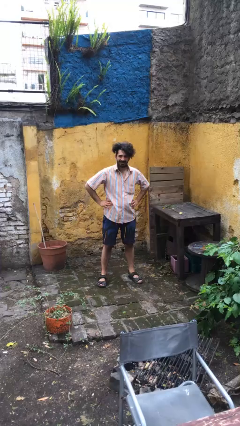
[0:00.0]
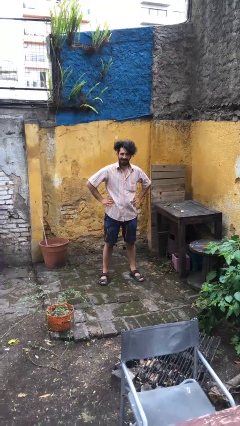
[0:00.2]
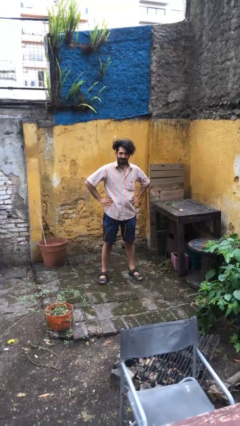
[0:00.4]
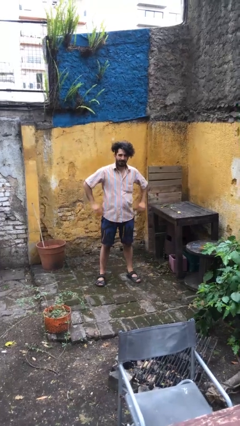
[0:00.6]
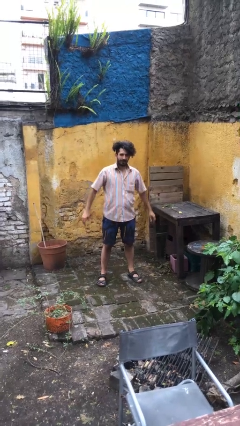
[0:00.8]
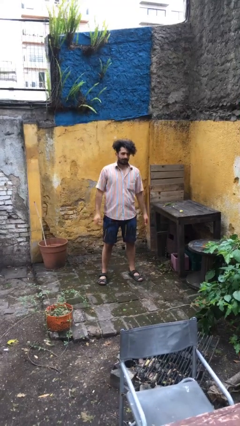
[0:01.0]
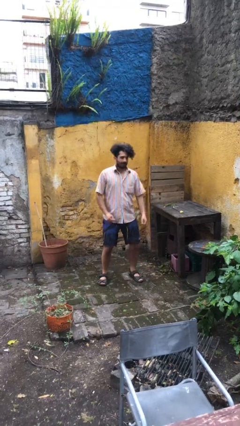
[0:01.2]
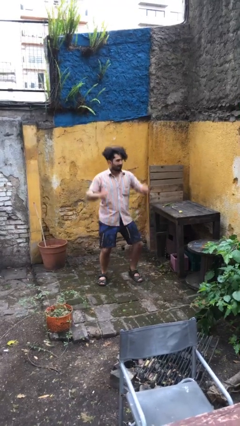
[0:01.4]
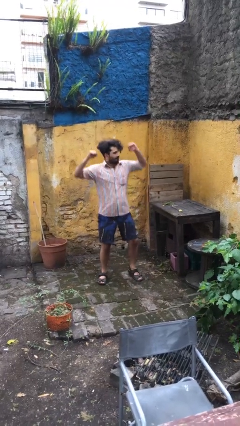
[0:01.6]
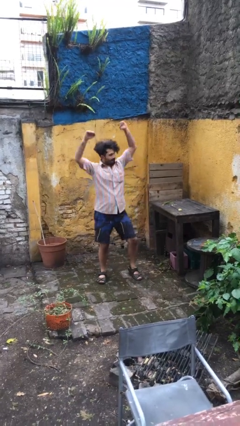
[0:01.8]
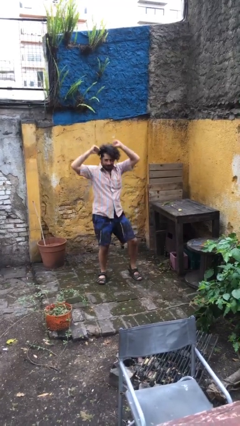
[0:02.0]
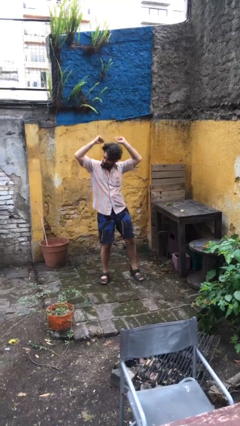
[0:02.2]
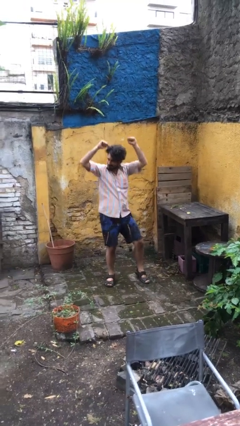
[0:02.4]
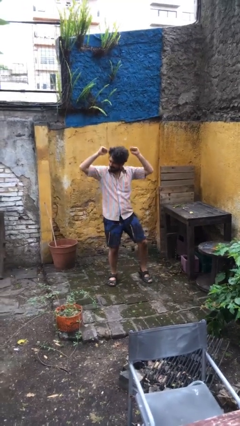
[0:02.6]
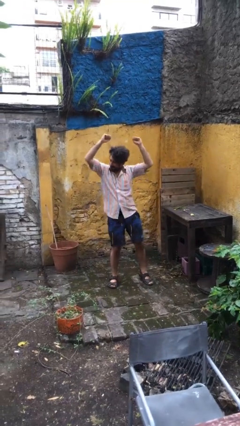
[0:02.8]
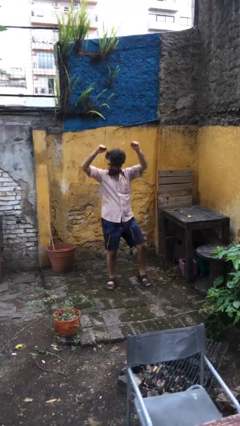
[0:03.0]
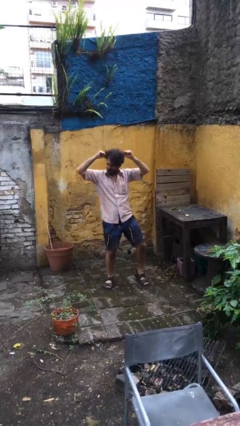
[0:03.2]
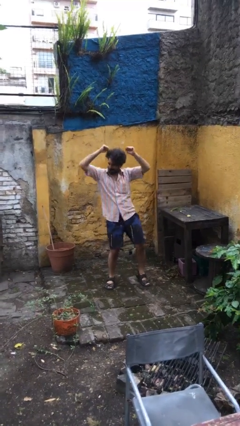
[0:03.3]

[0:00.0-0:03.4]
person dances in place

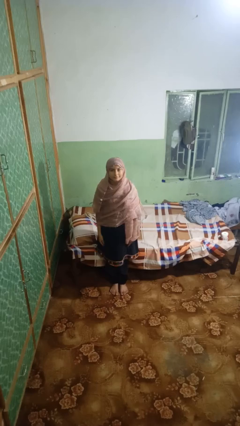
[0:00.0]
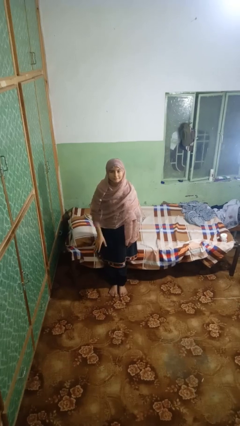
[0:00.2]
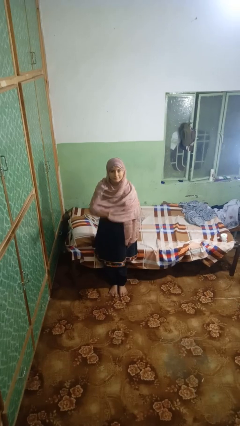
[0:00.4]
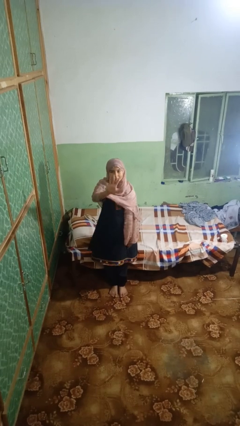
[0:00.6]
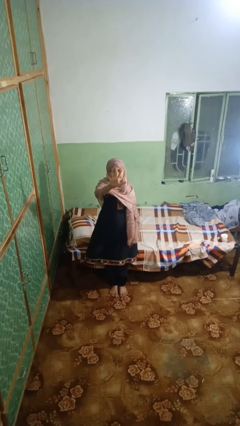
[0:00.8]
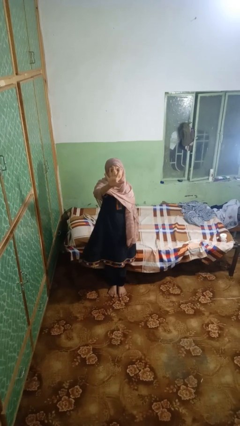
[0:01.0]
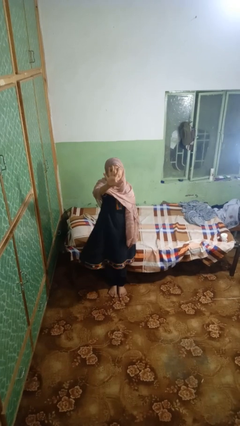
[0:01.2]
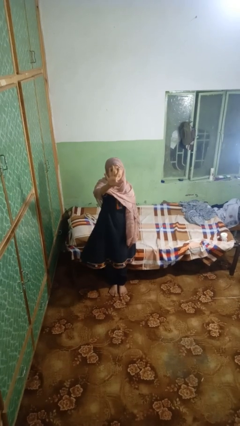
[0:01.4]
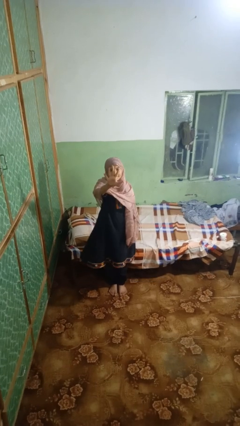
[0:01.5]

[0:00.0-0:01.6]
person gestures number five

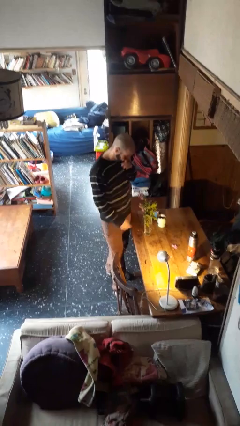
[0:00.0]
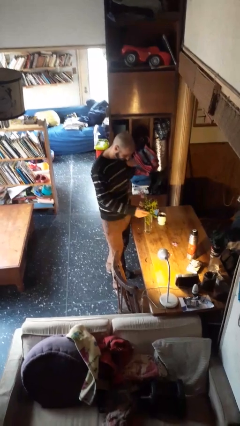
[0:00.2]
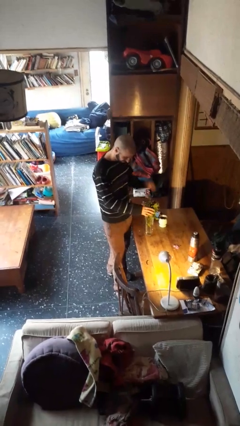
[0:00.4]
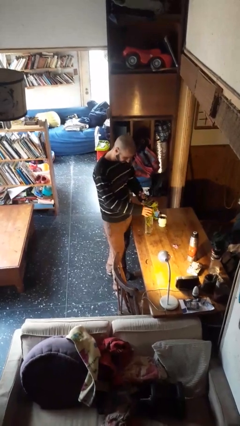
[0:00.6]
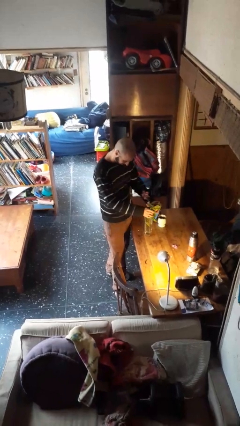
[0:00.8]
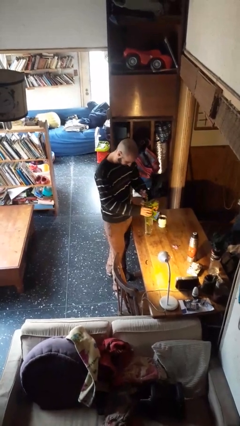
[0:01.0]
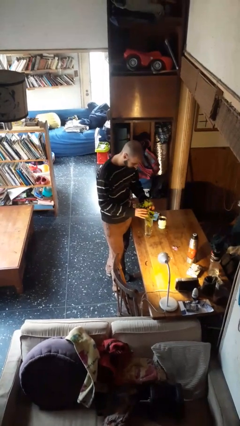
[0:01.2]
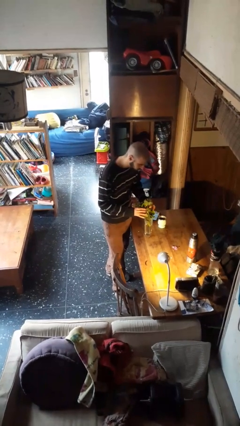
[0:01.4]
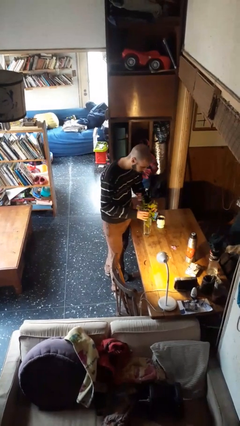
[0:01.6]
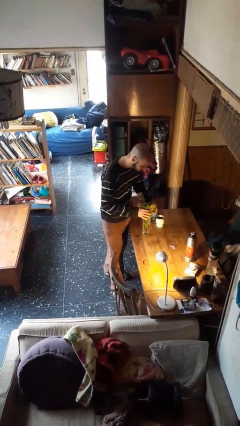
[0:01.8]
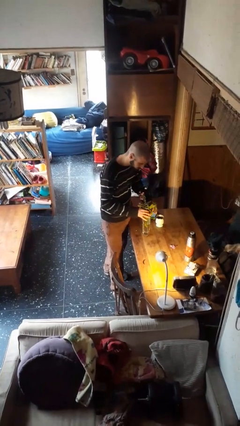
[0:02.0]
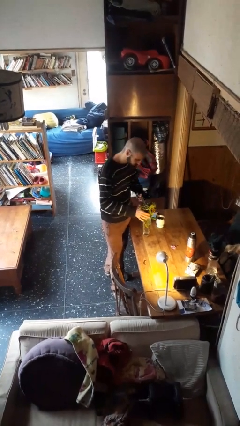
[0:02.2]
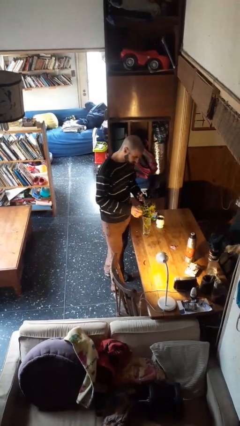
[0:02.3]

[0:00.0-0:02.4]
person arranges flowers in vase

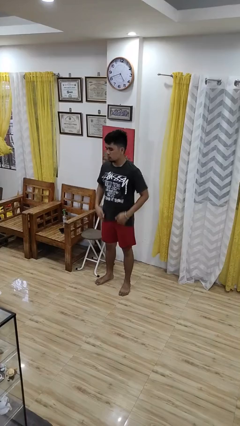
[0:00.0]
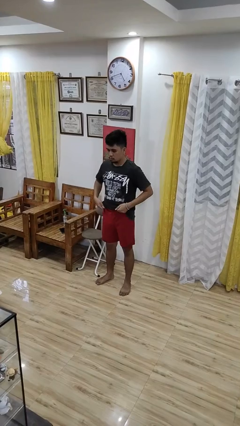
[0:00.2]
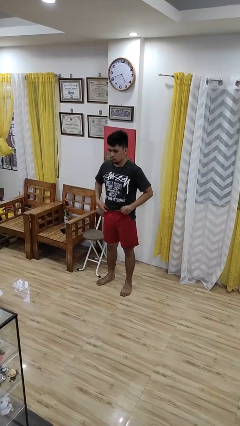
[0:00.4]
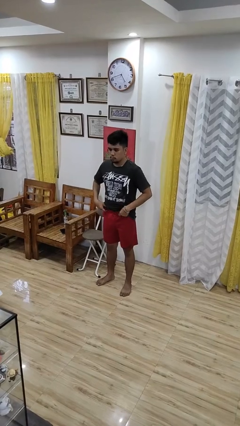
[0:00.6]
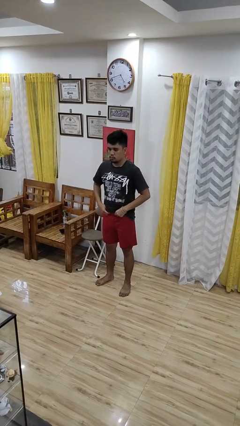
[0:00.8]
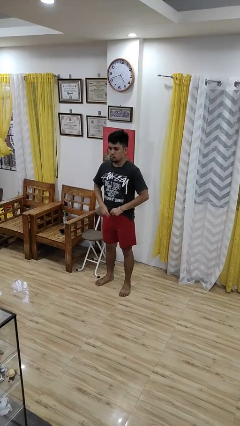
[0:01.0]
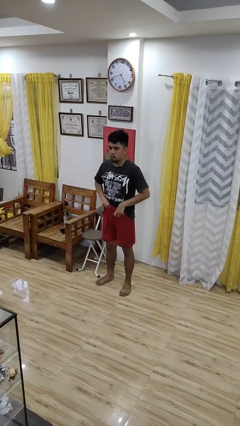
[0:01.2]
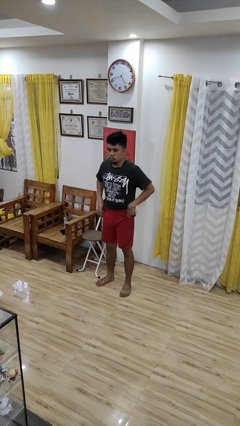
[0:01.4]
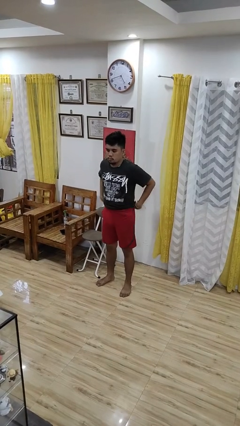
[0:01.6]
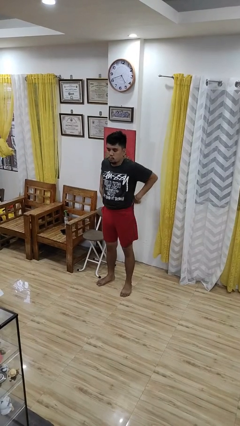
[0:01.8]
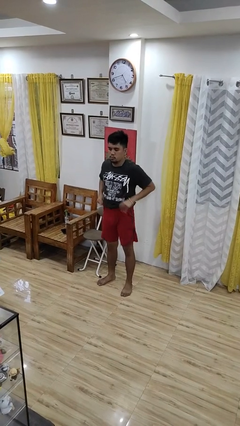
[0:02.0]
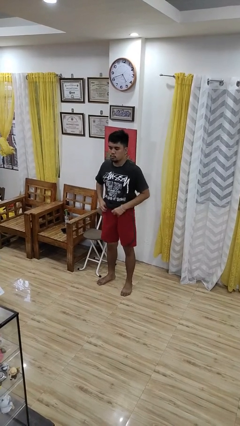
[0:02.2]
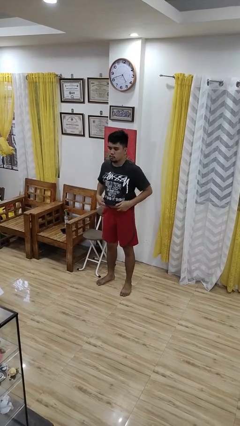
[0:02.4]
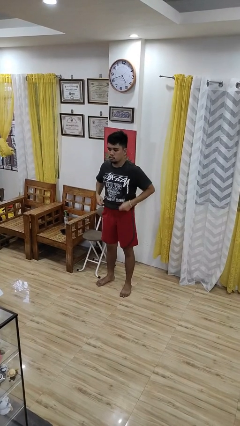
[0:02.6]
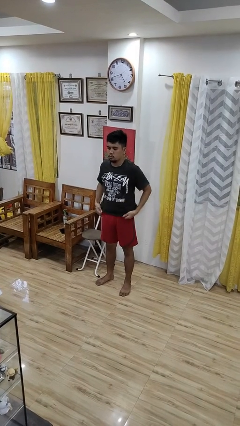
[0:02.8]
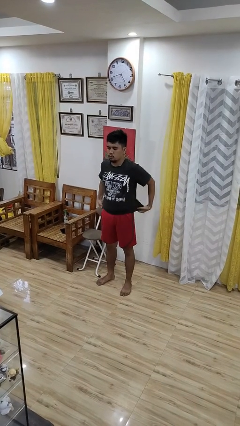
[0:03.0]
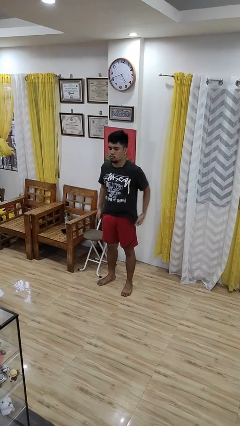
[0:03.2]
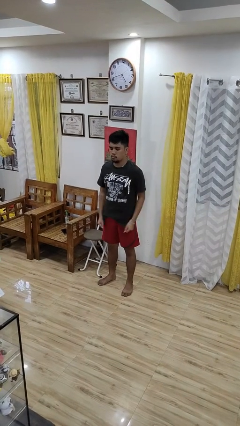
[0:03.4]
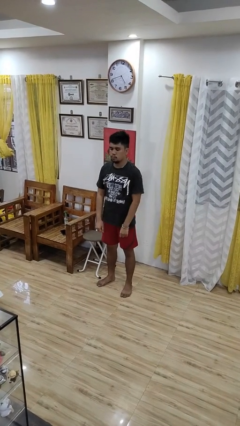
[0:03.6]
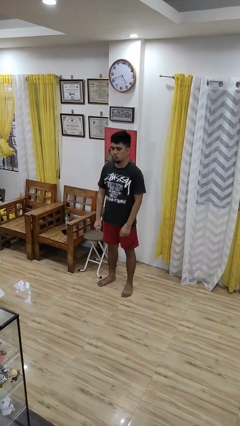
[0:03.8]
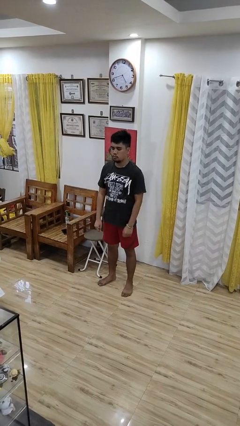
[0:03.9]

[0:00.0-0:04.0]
person hikes up pants

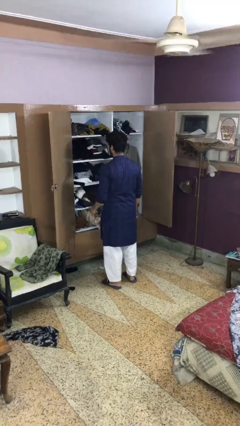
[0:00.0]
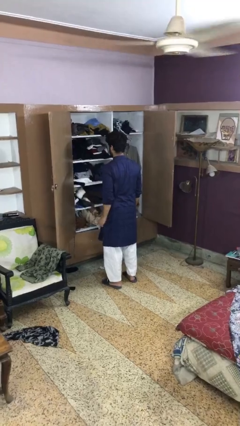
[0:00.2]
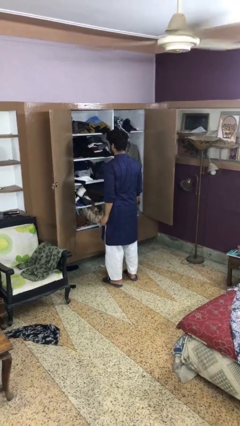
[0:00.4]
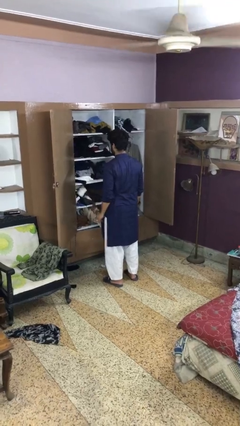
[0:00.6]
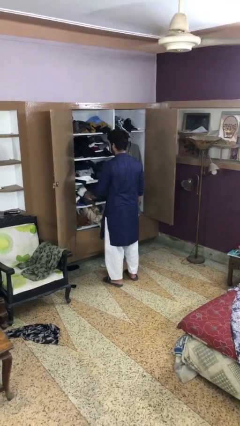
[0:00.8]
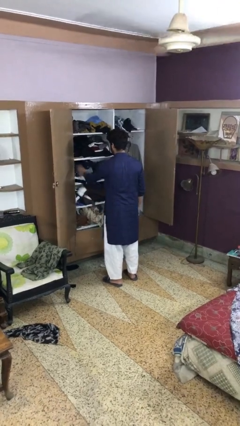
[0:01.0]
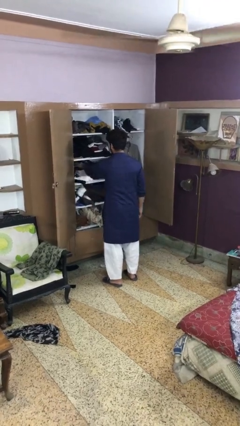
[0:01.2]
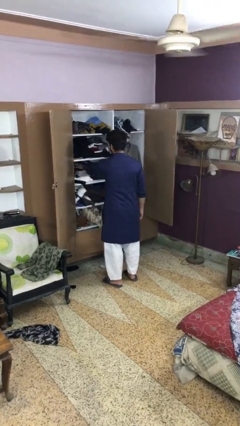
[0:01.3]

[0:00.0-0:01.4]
person takes clothes from dresser

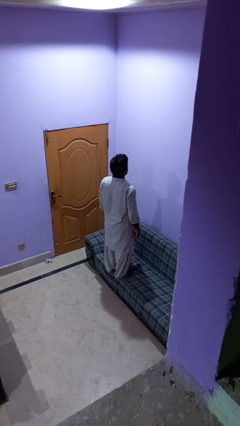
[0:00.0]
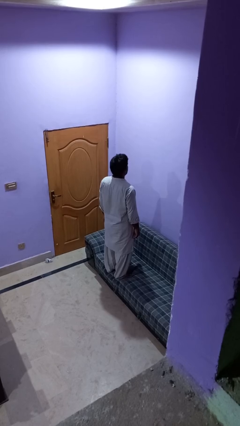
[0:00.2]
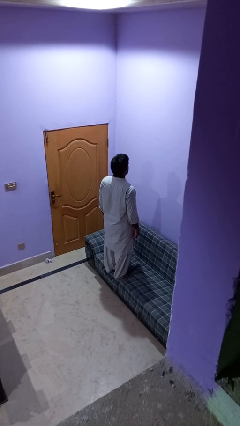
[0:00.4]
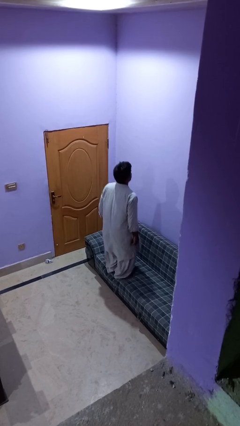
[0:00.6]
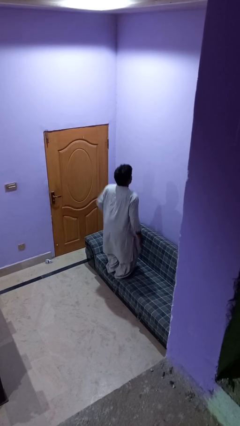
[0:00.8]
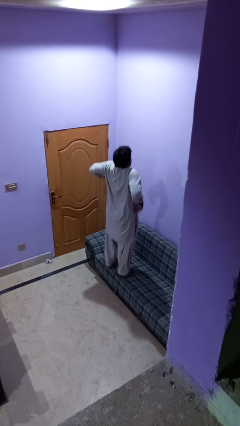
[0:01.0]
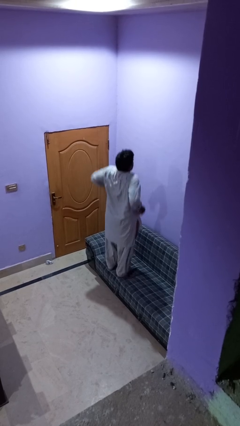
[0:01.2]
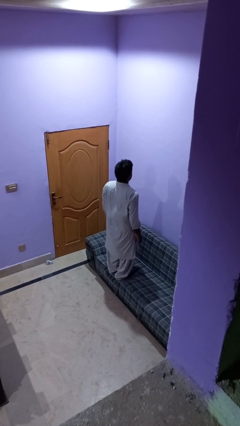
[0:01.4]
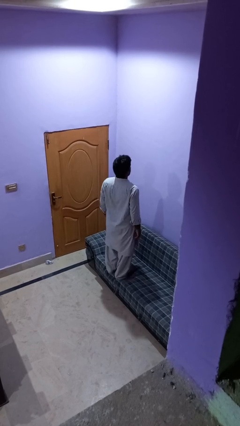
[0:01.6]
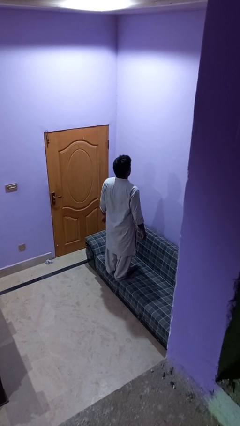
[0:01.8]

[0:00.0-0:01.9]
person jumps on couch

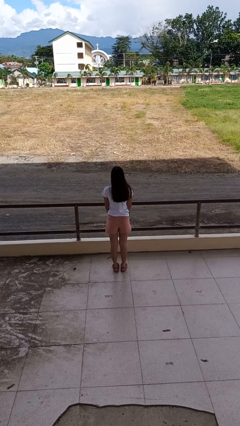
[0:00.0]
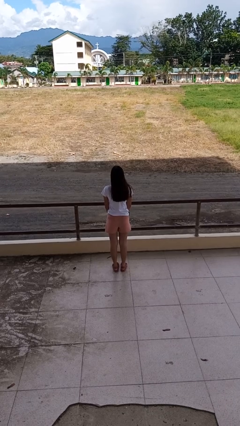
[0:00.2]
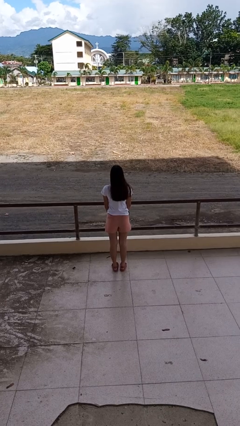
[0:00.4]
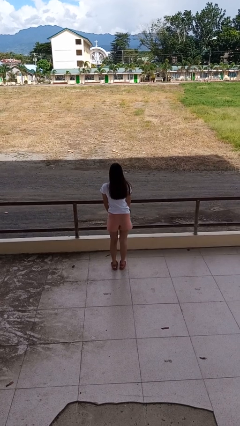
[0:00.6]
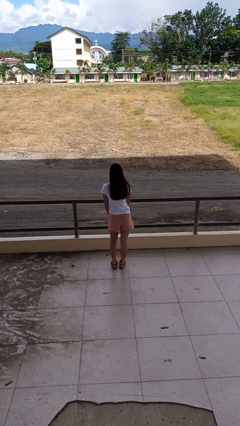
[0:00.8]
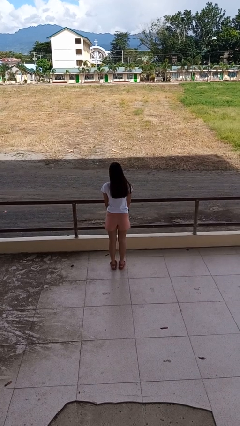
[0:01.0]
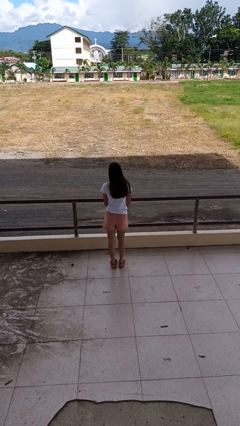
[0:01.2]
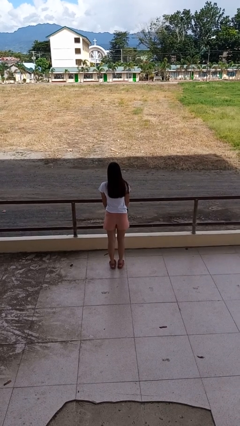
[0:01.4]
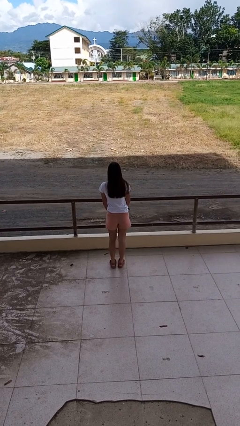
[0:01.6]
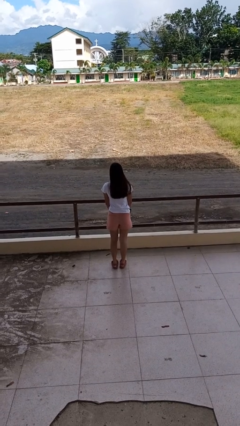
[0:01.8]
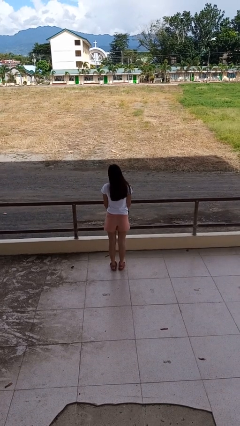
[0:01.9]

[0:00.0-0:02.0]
person wiggles hips

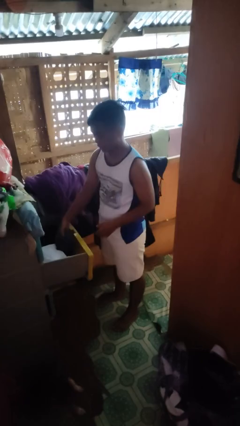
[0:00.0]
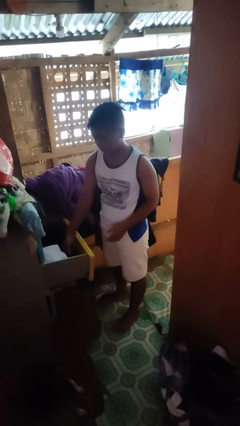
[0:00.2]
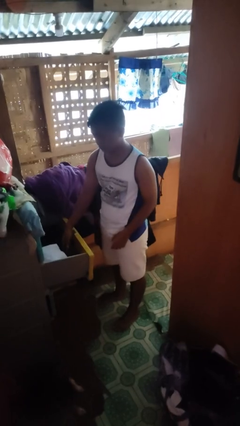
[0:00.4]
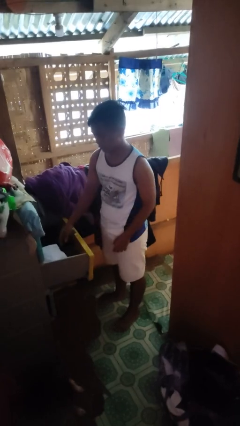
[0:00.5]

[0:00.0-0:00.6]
person puts clothes into dresser

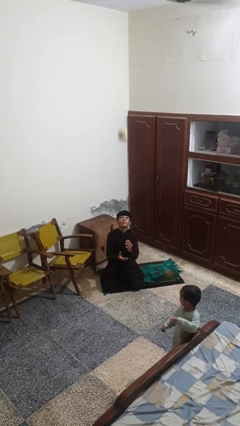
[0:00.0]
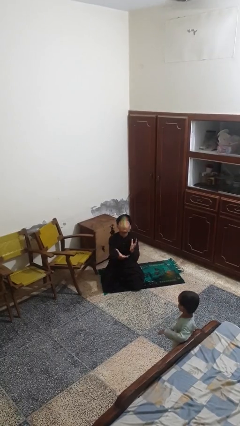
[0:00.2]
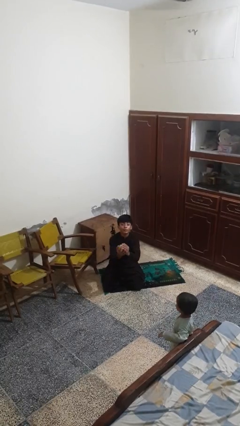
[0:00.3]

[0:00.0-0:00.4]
person catches dropped object
